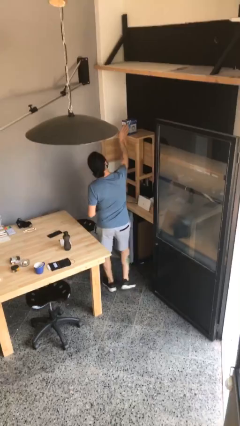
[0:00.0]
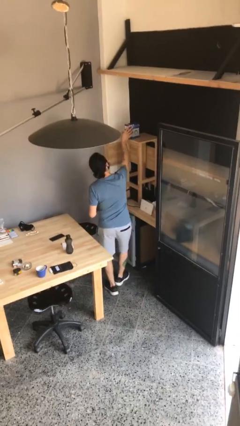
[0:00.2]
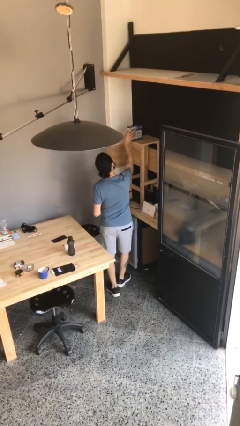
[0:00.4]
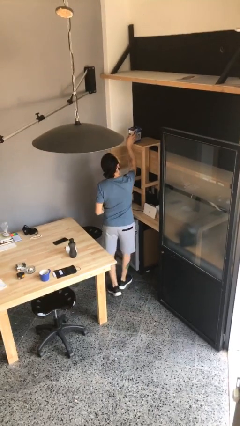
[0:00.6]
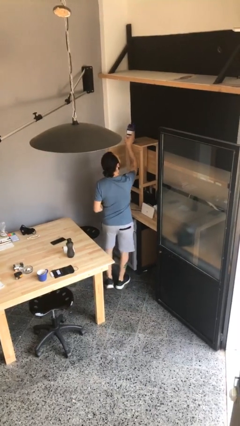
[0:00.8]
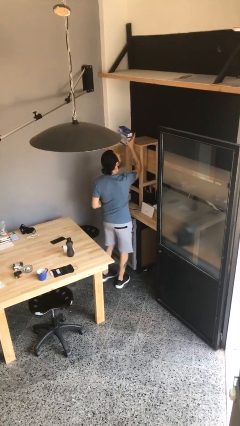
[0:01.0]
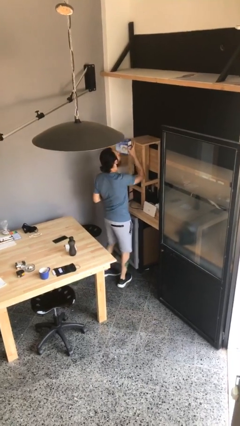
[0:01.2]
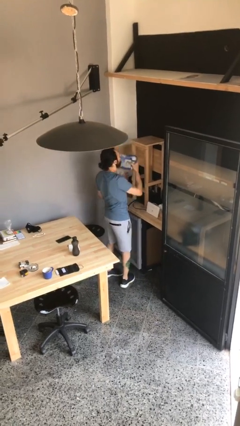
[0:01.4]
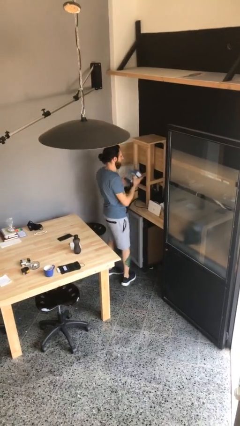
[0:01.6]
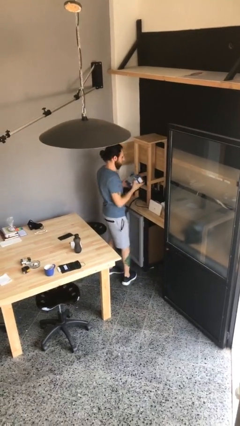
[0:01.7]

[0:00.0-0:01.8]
person picks up object from shelf

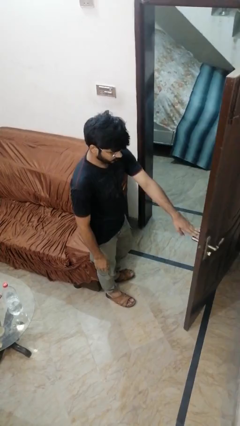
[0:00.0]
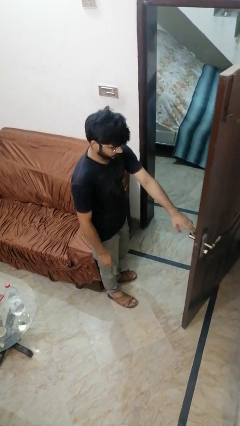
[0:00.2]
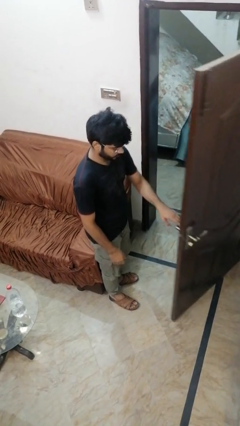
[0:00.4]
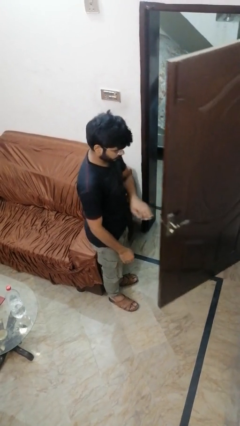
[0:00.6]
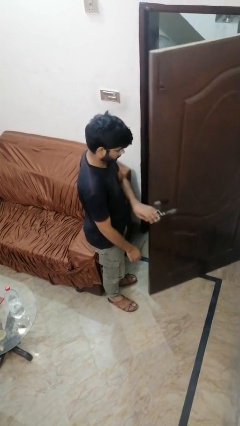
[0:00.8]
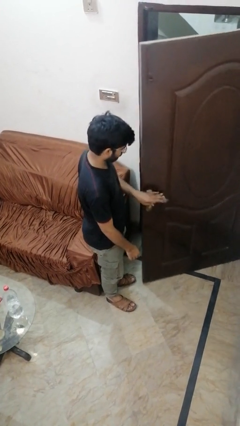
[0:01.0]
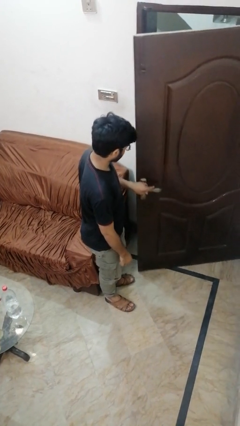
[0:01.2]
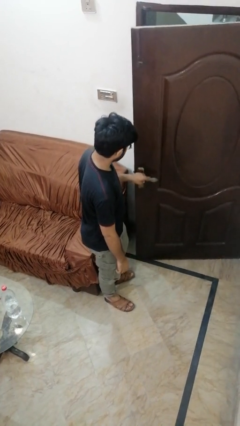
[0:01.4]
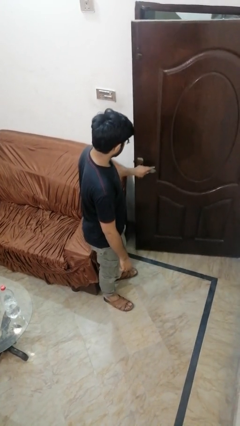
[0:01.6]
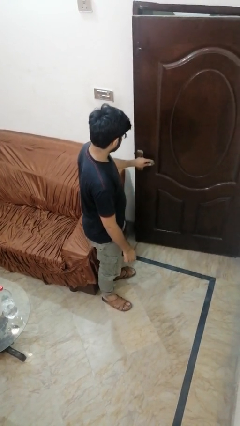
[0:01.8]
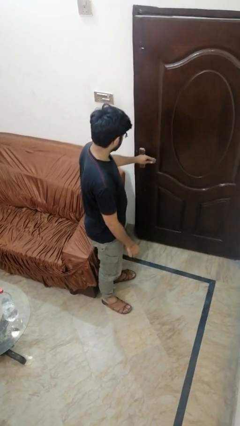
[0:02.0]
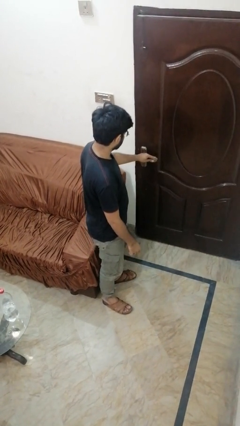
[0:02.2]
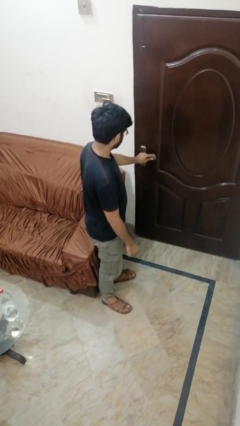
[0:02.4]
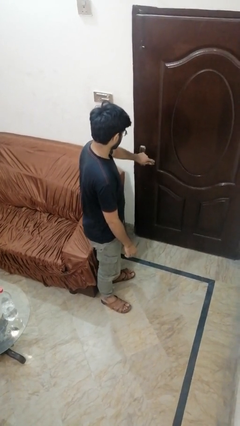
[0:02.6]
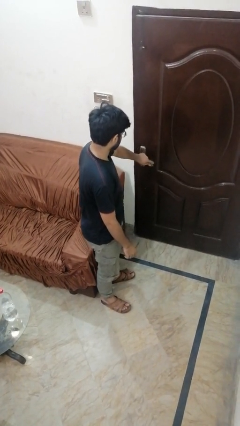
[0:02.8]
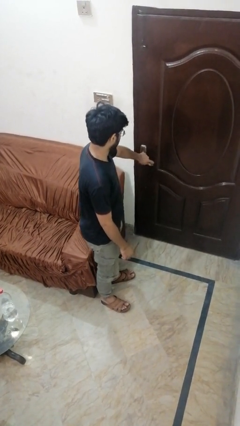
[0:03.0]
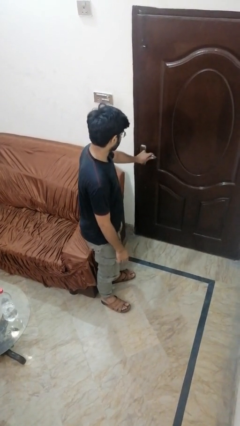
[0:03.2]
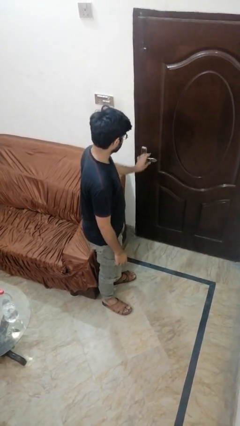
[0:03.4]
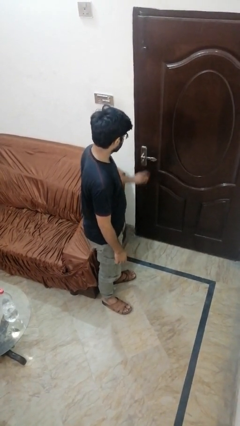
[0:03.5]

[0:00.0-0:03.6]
person closes facility door

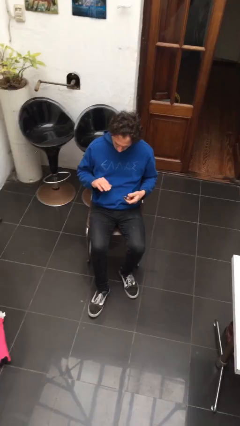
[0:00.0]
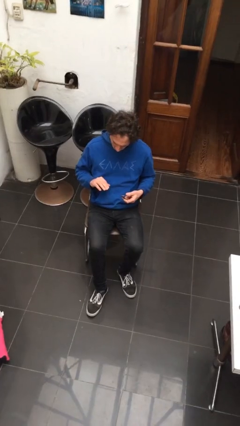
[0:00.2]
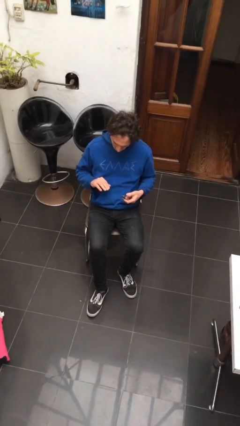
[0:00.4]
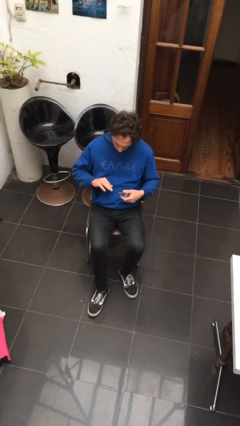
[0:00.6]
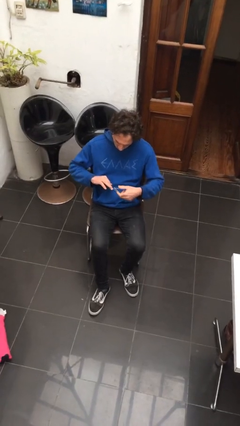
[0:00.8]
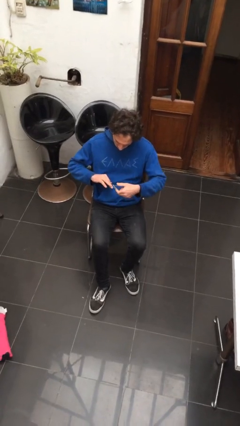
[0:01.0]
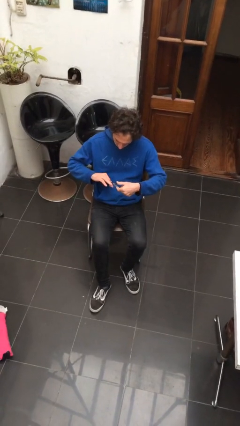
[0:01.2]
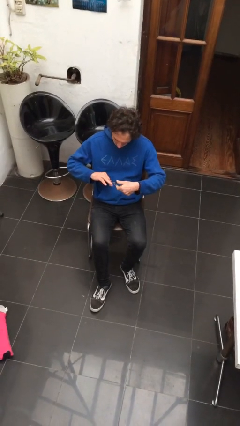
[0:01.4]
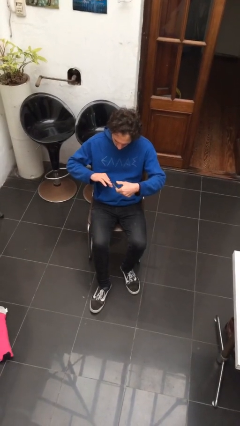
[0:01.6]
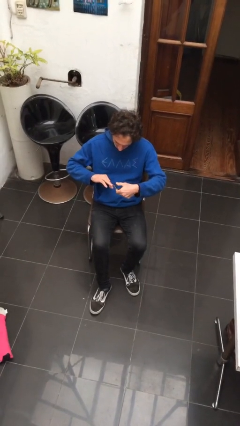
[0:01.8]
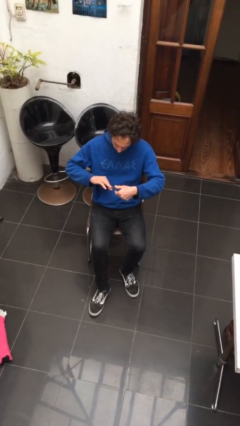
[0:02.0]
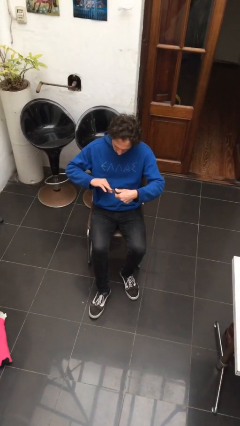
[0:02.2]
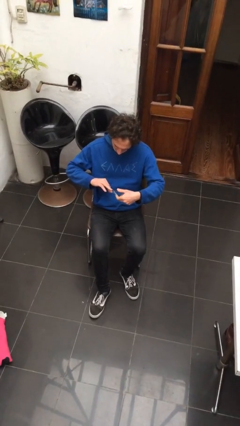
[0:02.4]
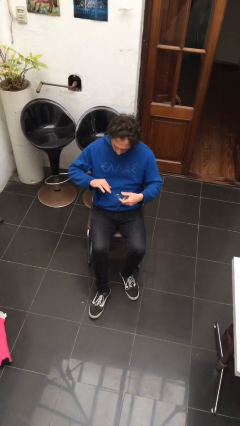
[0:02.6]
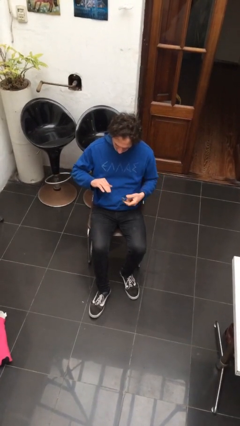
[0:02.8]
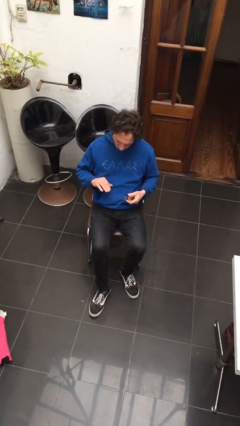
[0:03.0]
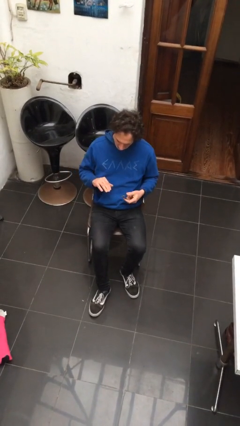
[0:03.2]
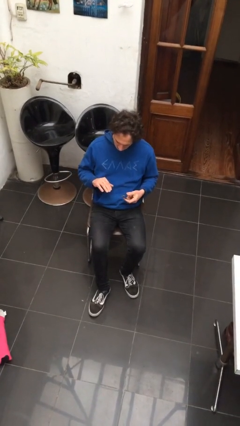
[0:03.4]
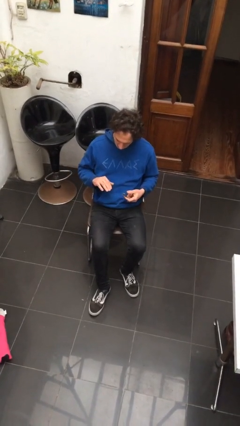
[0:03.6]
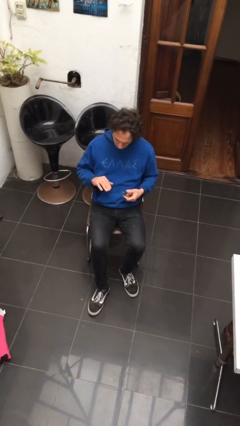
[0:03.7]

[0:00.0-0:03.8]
person clips fingernails

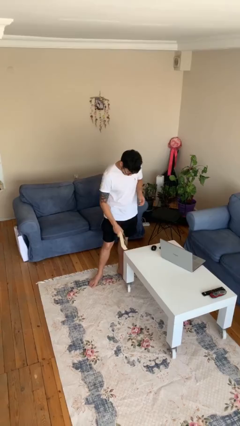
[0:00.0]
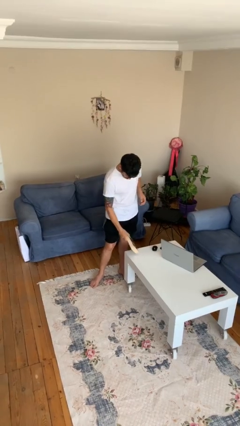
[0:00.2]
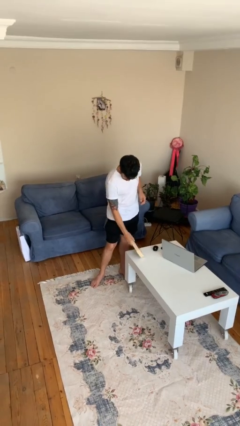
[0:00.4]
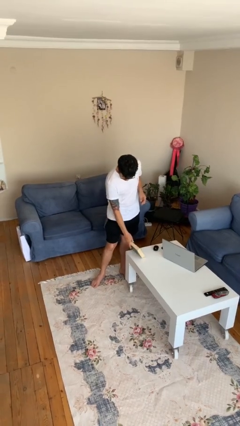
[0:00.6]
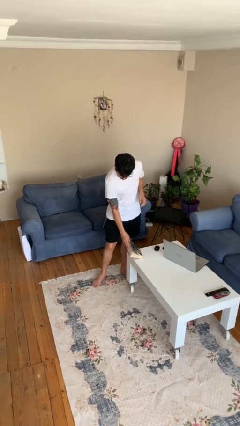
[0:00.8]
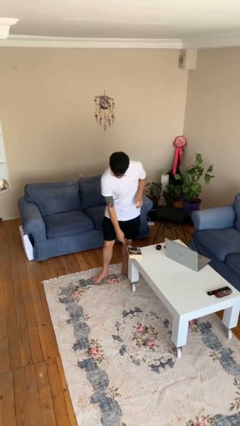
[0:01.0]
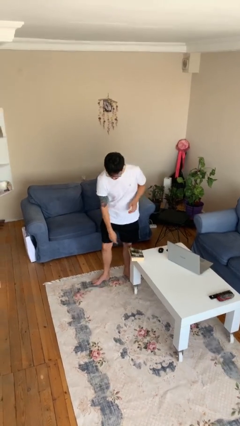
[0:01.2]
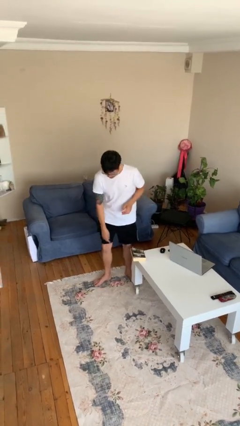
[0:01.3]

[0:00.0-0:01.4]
person puts down object on table

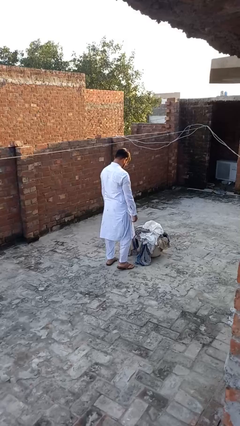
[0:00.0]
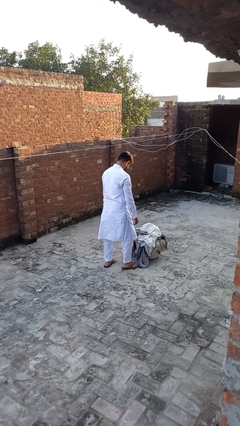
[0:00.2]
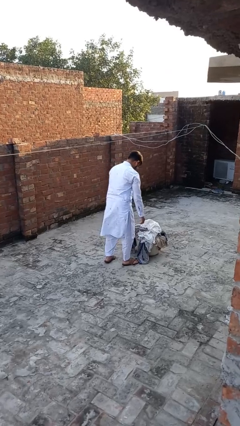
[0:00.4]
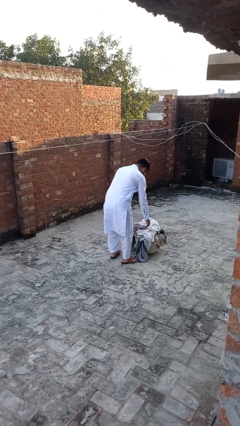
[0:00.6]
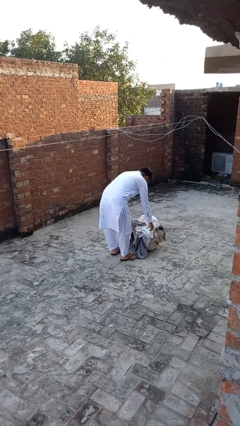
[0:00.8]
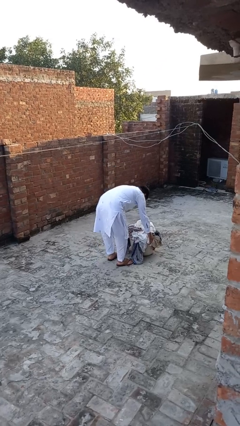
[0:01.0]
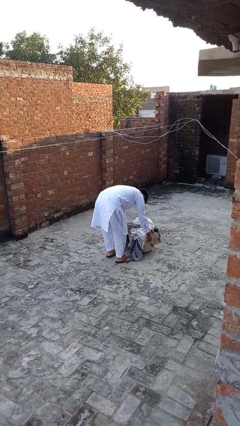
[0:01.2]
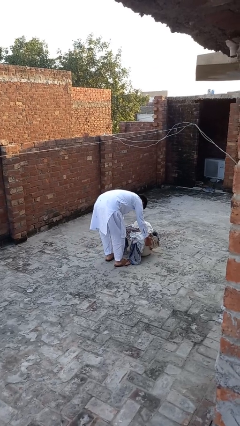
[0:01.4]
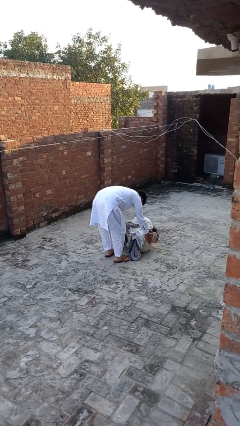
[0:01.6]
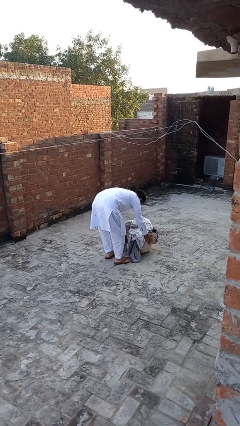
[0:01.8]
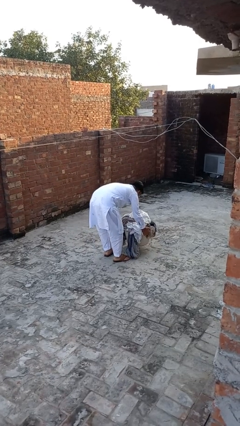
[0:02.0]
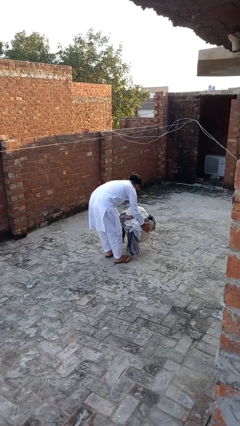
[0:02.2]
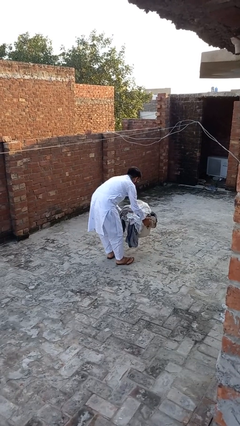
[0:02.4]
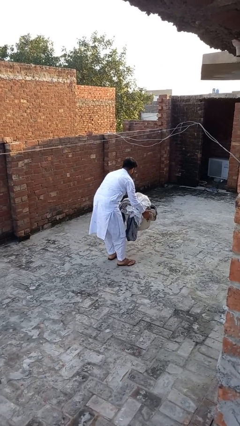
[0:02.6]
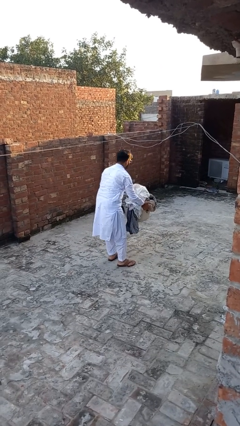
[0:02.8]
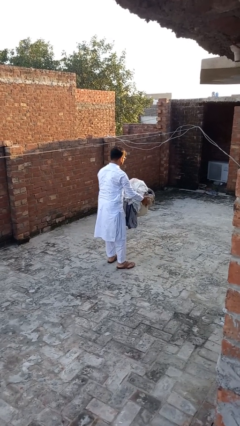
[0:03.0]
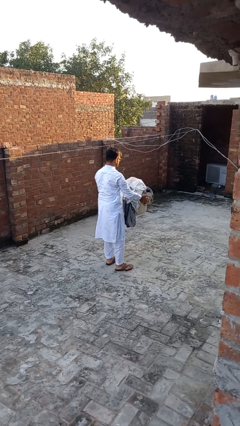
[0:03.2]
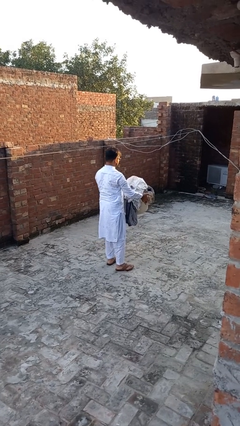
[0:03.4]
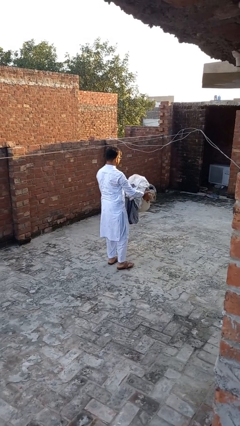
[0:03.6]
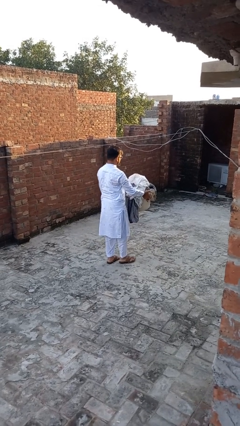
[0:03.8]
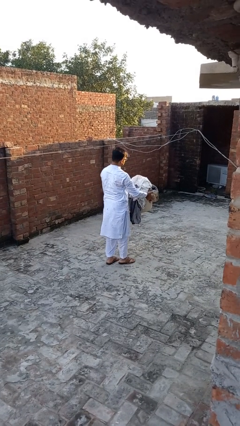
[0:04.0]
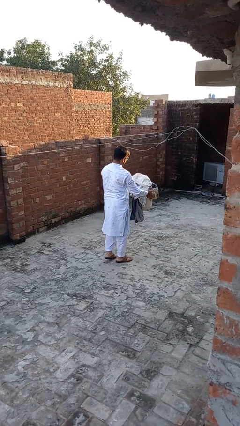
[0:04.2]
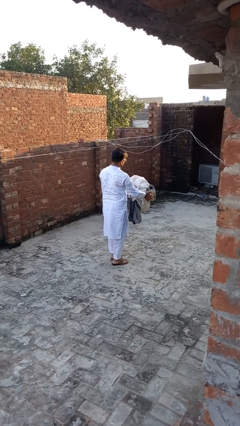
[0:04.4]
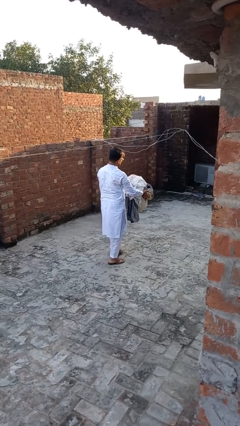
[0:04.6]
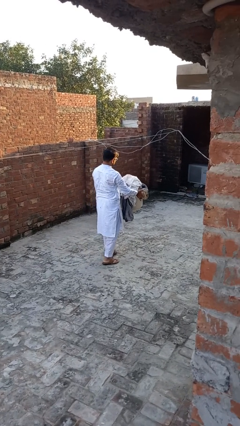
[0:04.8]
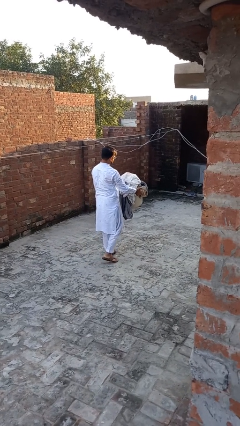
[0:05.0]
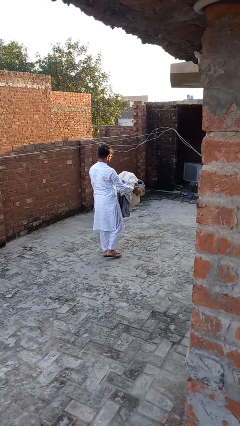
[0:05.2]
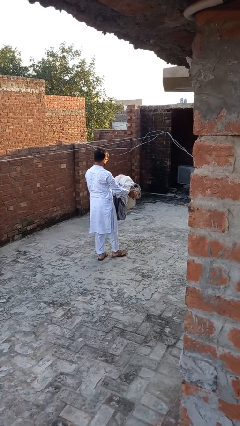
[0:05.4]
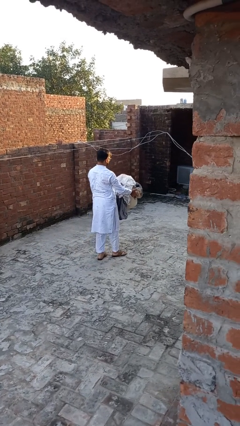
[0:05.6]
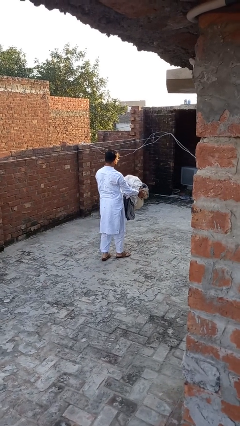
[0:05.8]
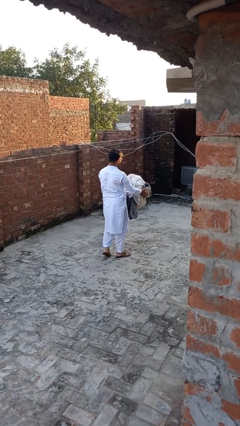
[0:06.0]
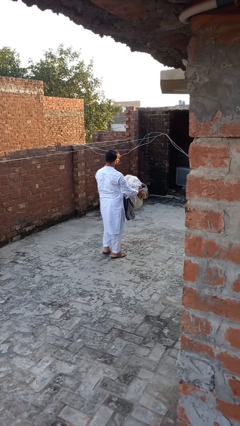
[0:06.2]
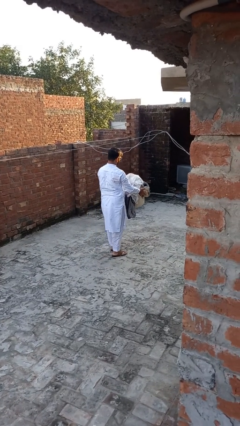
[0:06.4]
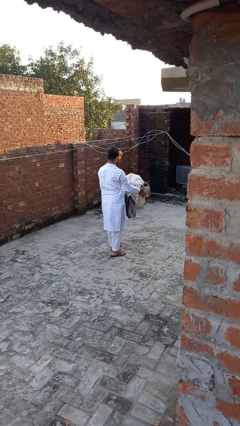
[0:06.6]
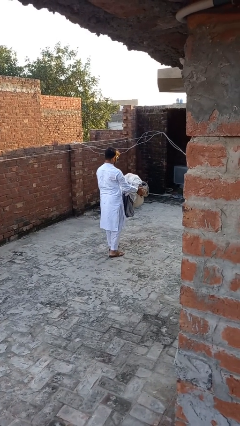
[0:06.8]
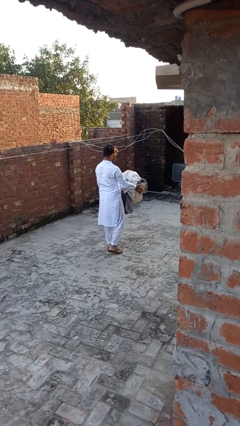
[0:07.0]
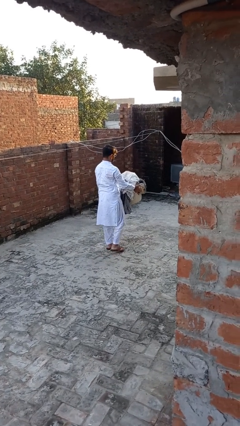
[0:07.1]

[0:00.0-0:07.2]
person carries laundry basket

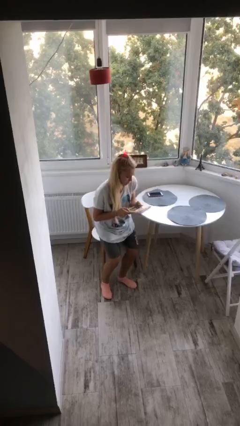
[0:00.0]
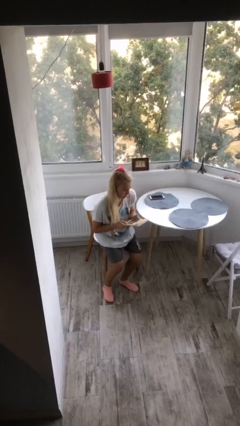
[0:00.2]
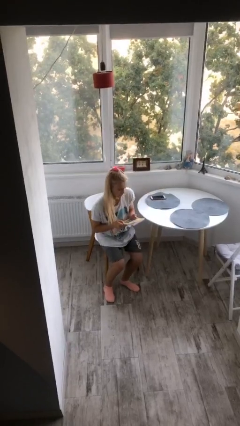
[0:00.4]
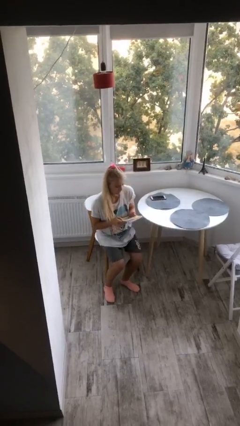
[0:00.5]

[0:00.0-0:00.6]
person sits down
